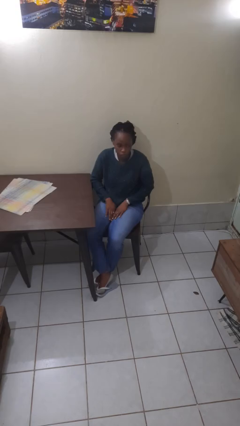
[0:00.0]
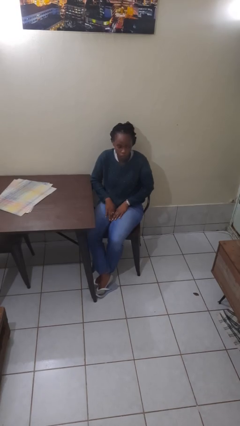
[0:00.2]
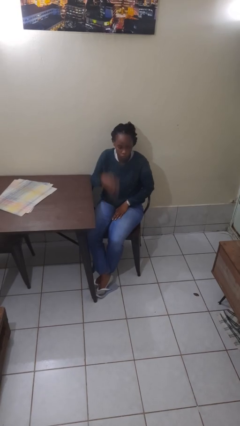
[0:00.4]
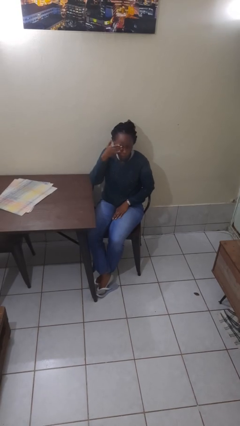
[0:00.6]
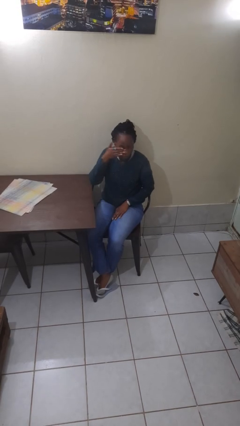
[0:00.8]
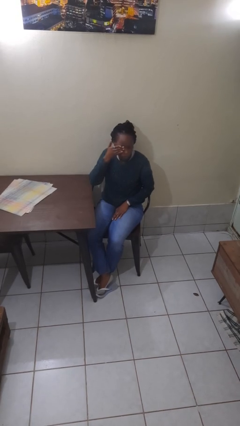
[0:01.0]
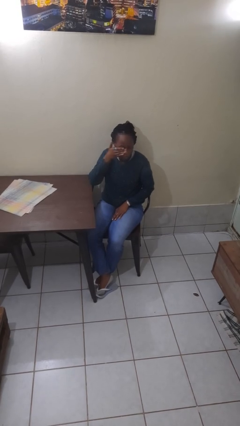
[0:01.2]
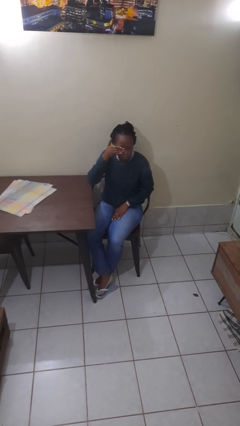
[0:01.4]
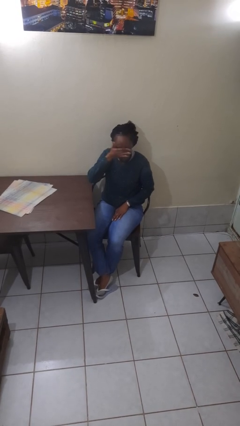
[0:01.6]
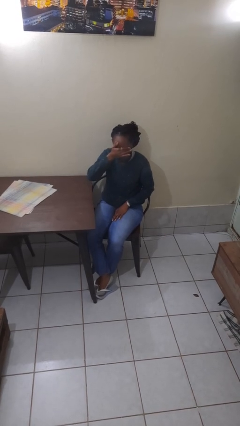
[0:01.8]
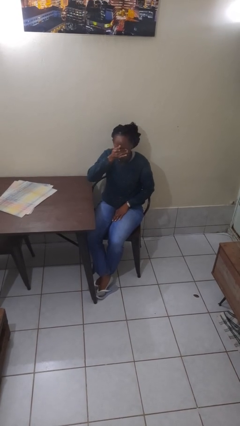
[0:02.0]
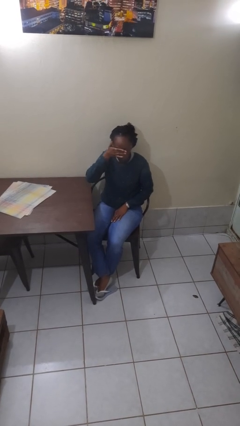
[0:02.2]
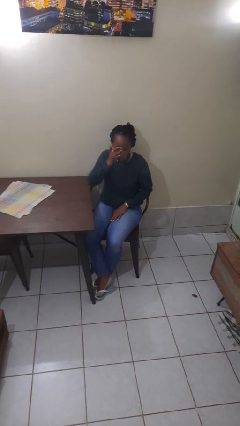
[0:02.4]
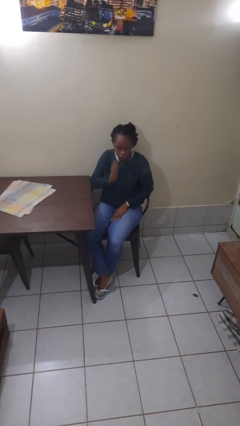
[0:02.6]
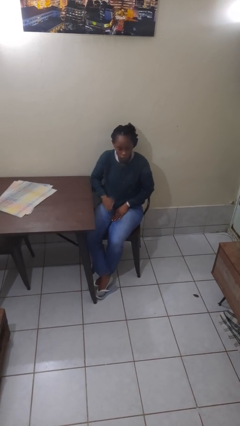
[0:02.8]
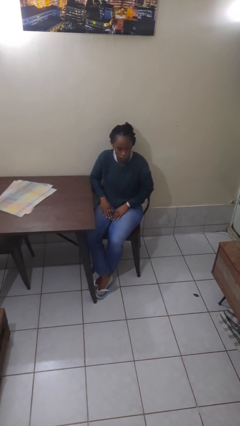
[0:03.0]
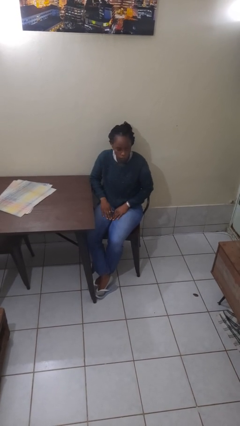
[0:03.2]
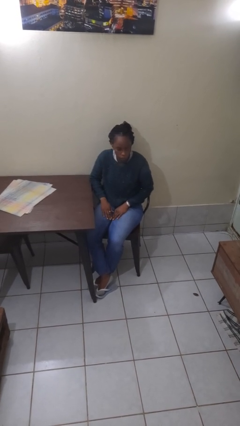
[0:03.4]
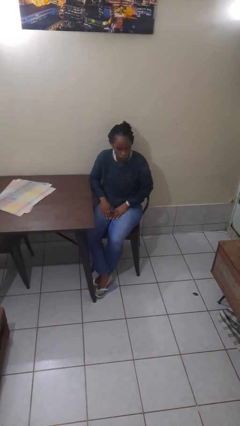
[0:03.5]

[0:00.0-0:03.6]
person rubs eyes

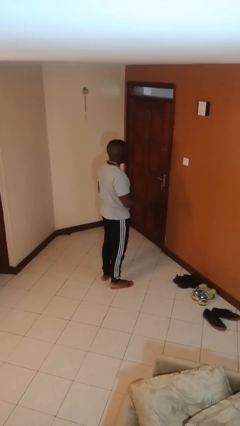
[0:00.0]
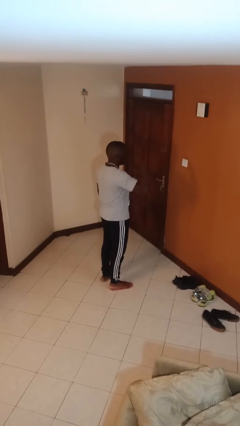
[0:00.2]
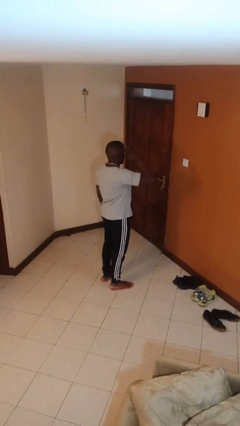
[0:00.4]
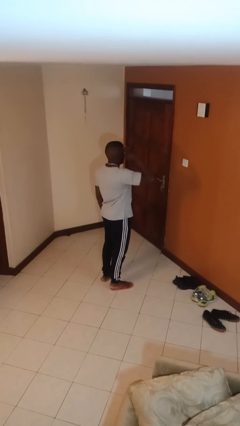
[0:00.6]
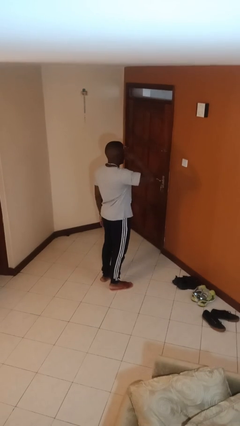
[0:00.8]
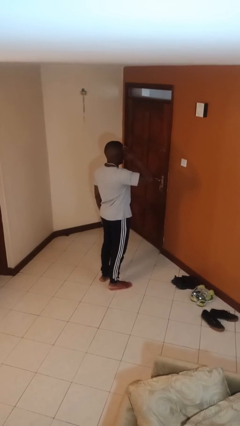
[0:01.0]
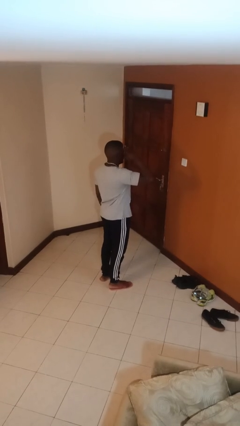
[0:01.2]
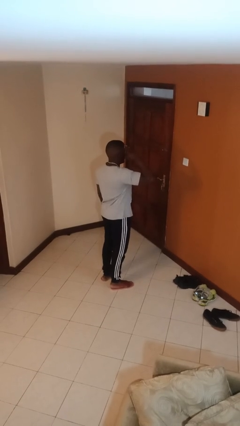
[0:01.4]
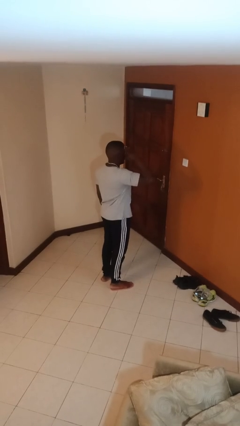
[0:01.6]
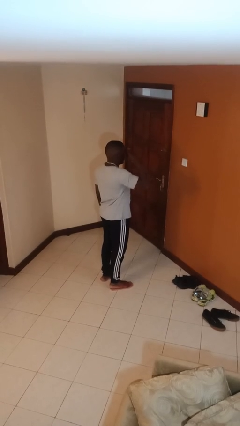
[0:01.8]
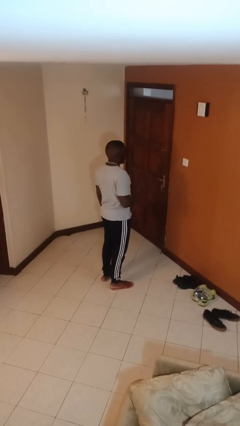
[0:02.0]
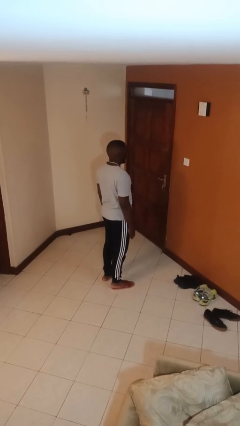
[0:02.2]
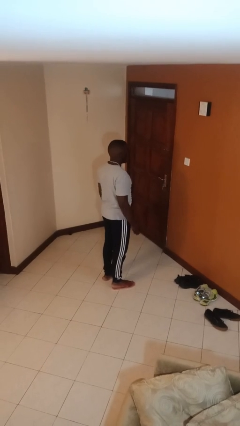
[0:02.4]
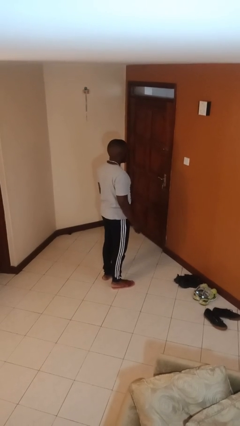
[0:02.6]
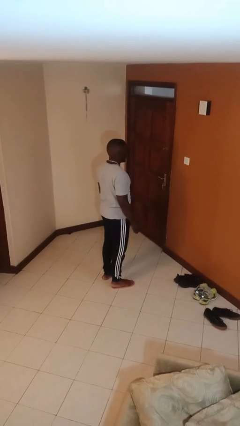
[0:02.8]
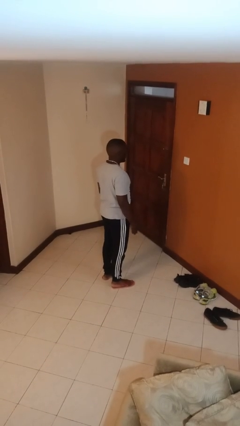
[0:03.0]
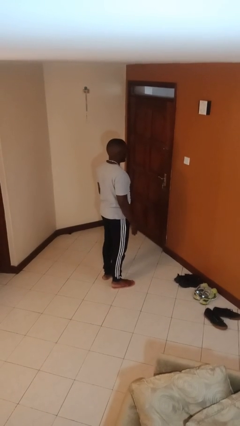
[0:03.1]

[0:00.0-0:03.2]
person salutes

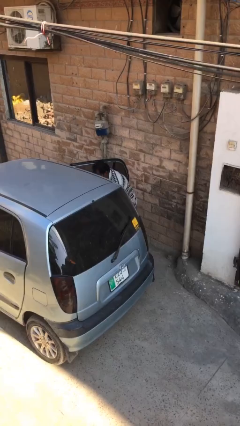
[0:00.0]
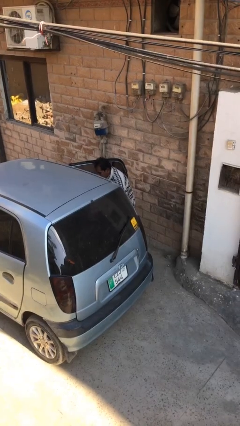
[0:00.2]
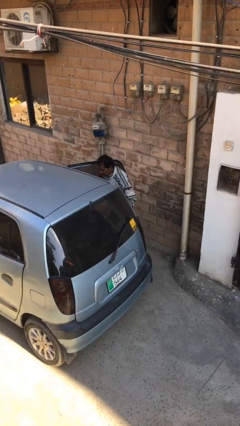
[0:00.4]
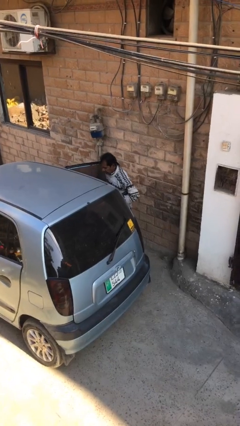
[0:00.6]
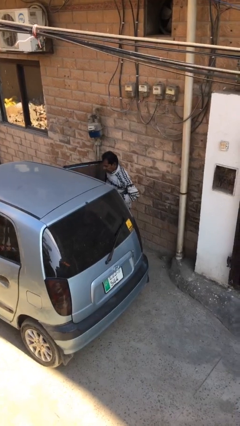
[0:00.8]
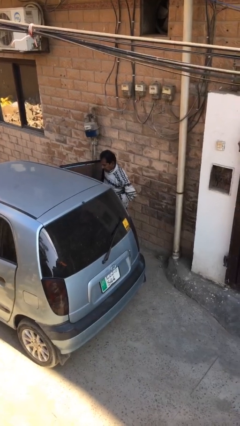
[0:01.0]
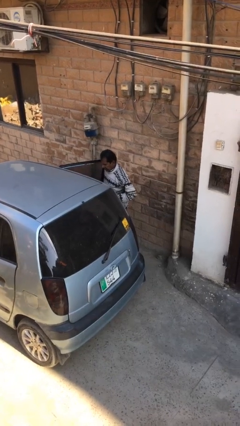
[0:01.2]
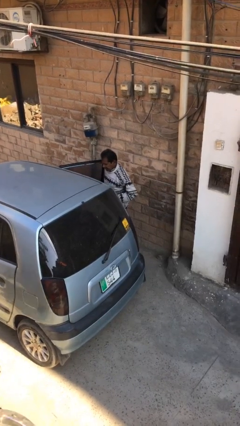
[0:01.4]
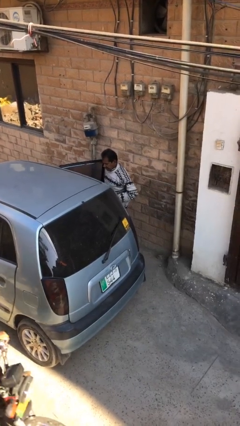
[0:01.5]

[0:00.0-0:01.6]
person unloads car

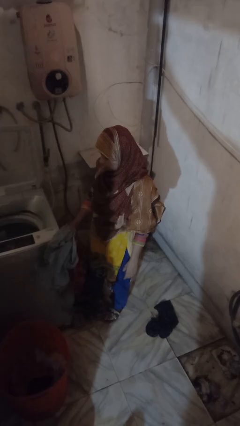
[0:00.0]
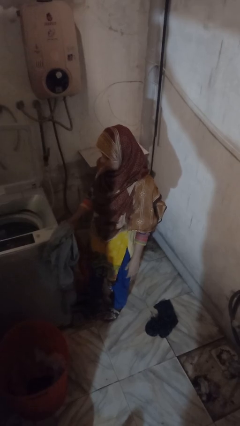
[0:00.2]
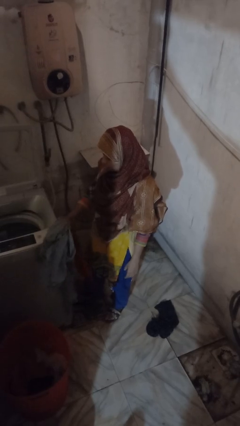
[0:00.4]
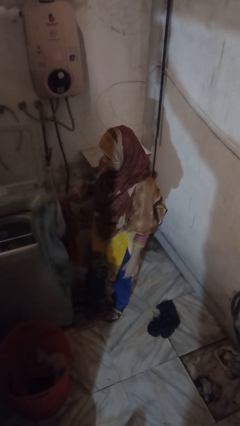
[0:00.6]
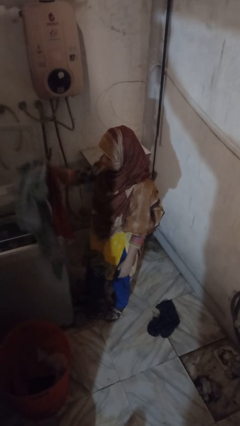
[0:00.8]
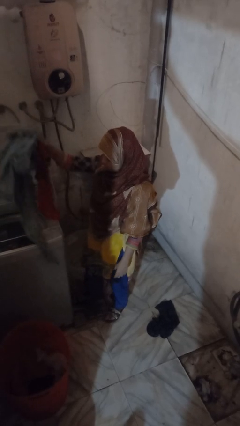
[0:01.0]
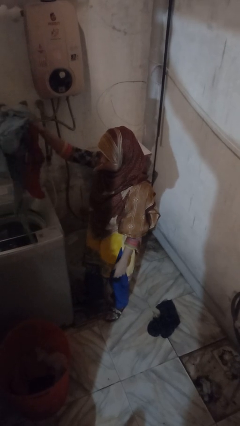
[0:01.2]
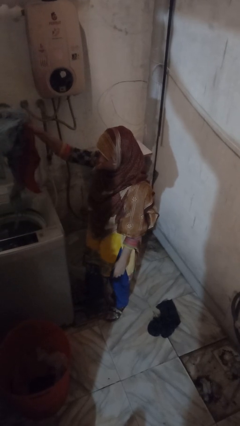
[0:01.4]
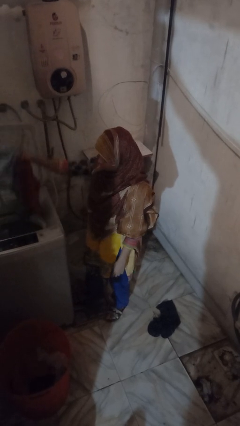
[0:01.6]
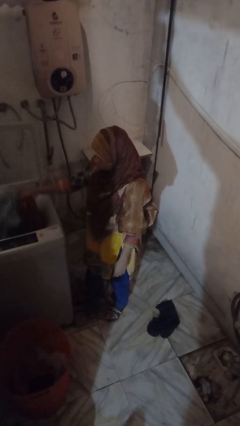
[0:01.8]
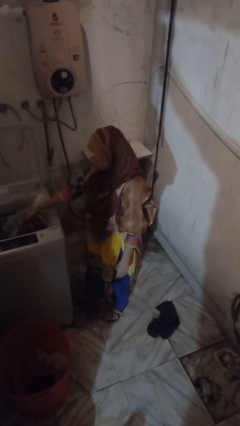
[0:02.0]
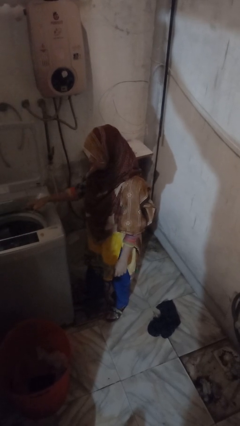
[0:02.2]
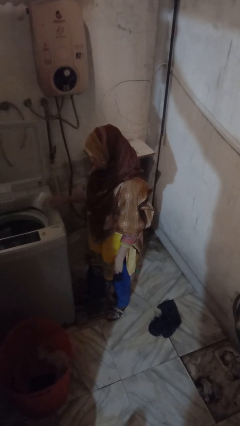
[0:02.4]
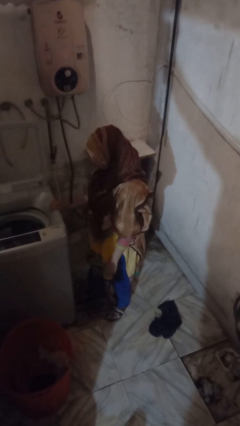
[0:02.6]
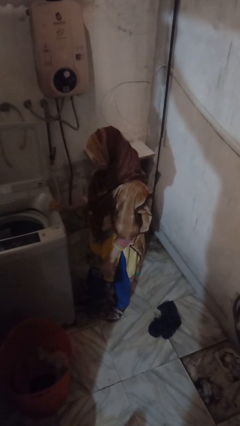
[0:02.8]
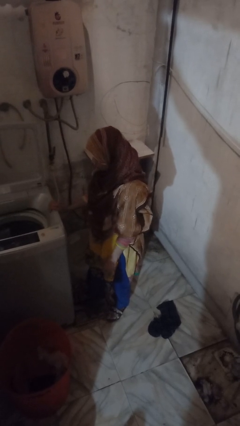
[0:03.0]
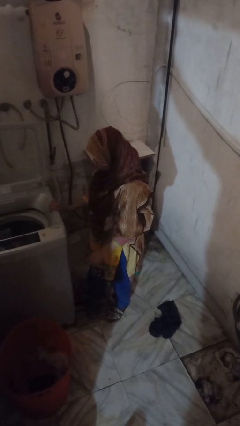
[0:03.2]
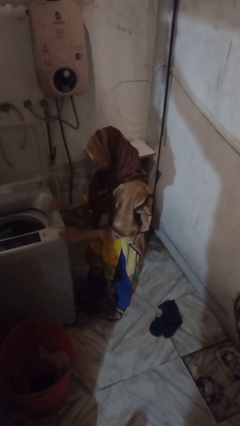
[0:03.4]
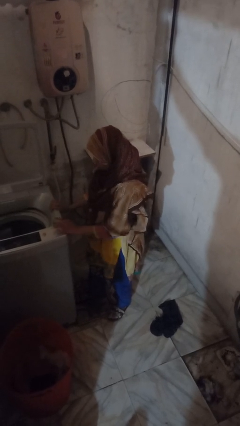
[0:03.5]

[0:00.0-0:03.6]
person loads dryer

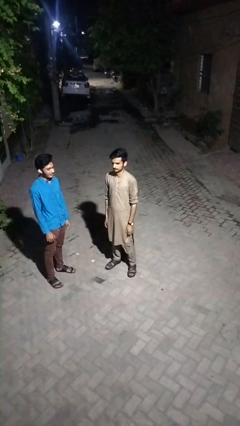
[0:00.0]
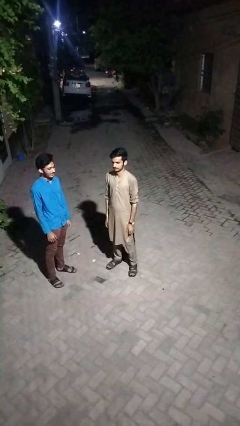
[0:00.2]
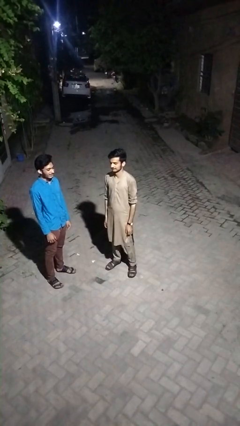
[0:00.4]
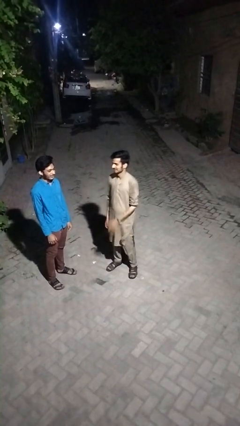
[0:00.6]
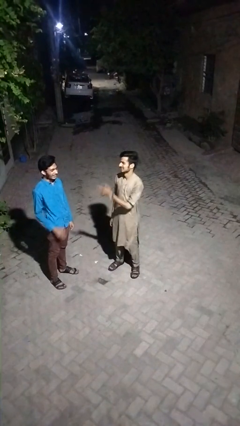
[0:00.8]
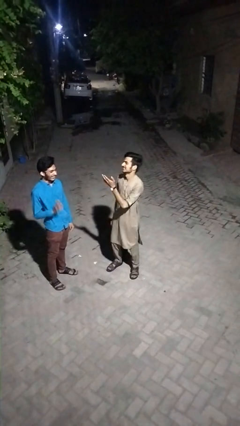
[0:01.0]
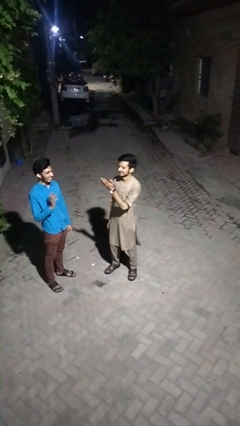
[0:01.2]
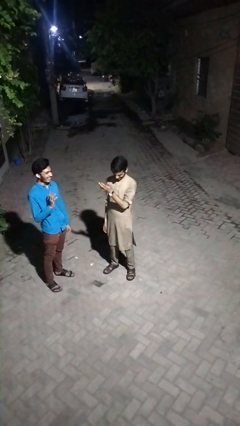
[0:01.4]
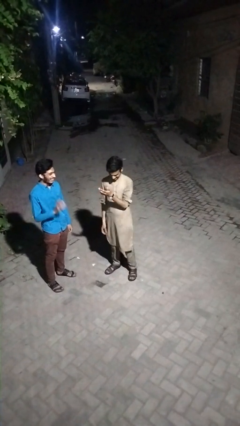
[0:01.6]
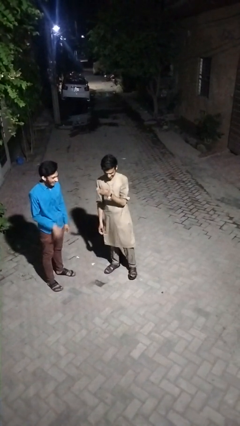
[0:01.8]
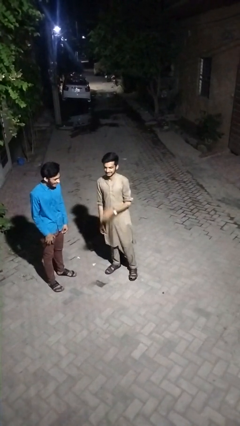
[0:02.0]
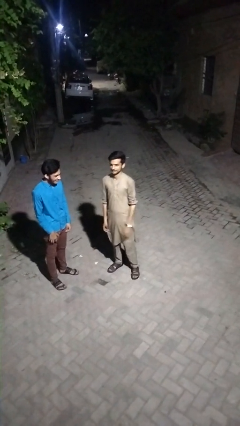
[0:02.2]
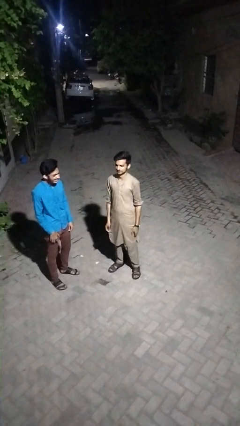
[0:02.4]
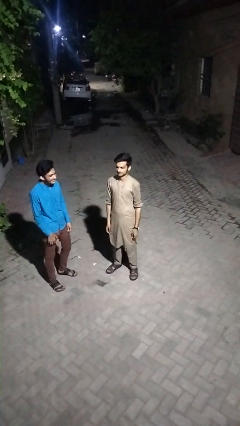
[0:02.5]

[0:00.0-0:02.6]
person laughs with person

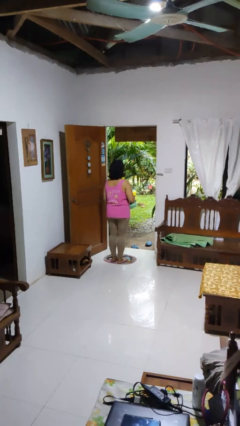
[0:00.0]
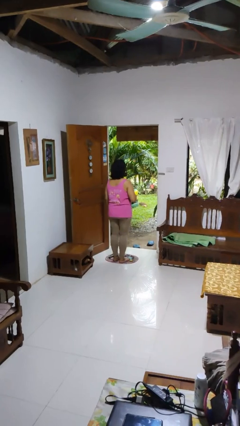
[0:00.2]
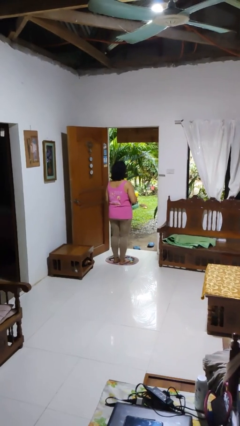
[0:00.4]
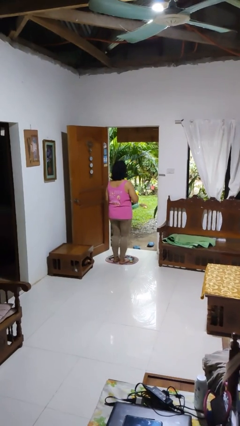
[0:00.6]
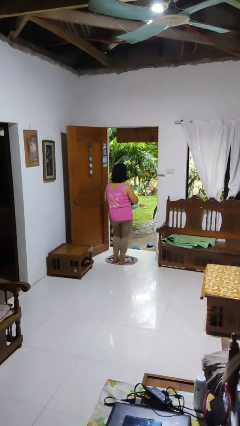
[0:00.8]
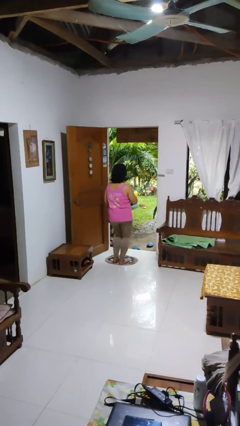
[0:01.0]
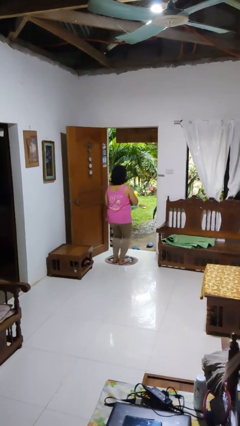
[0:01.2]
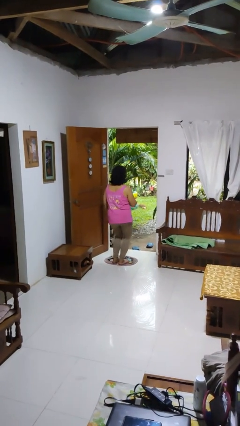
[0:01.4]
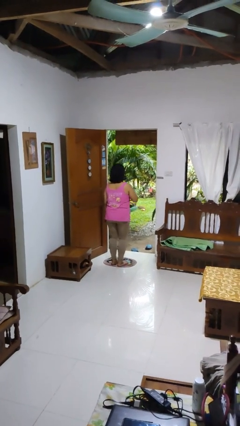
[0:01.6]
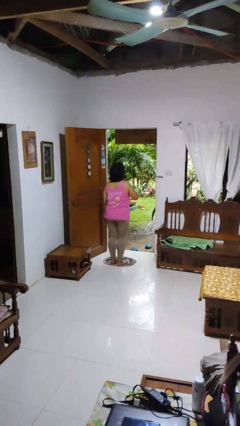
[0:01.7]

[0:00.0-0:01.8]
person wiggles hips

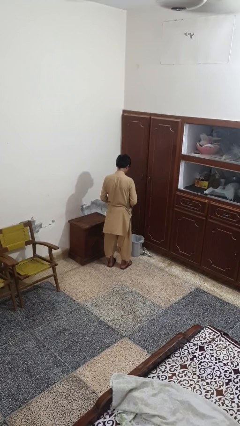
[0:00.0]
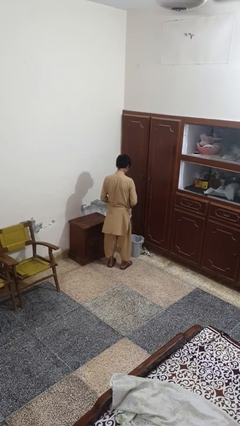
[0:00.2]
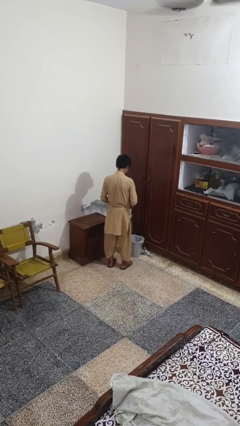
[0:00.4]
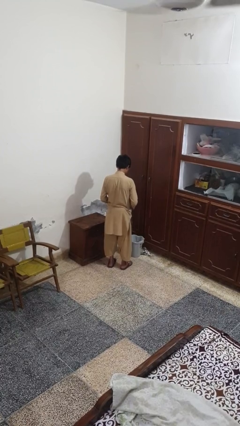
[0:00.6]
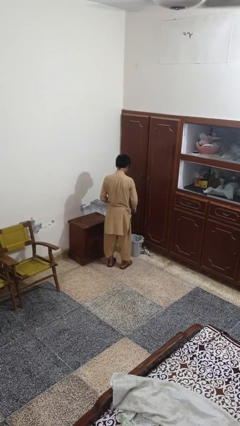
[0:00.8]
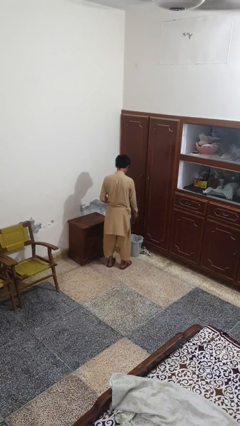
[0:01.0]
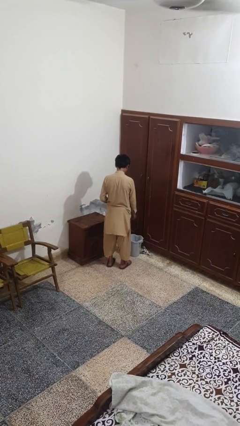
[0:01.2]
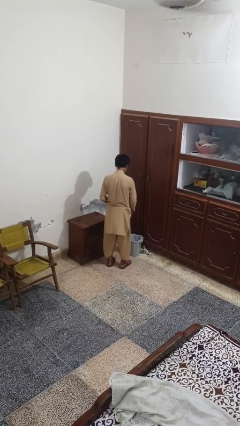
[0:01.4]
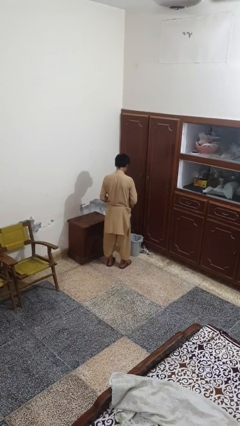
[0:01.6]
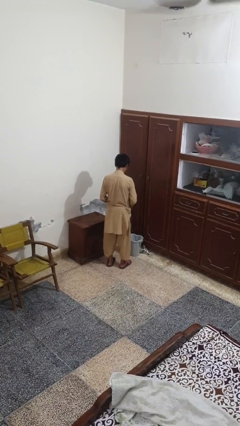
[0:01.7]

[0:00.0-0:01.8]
person discards trash
